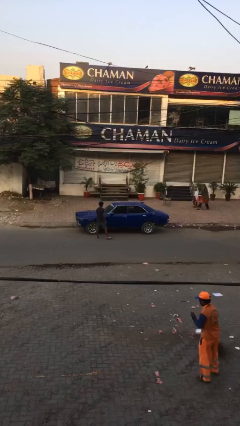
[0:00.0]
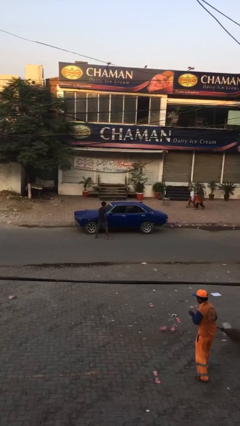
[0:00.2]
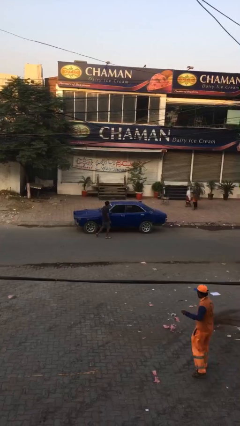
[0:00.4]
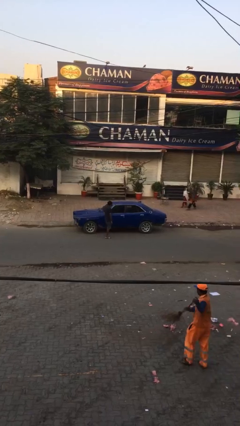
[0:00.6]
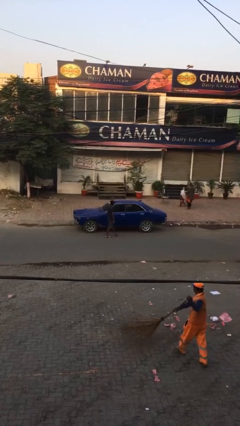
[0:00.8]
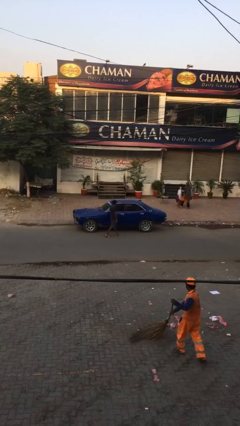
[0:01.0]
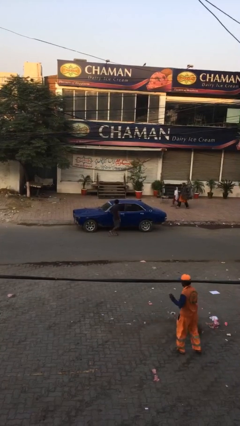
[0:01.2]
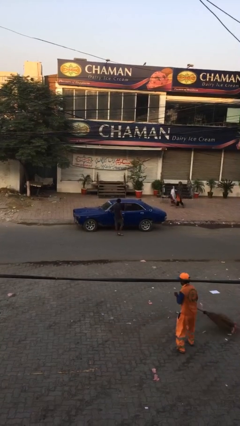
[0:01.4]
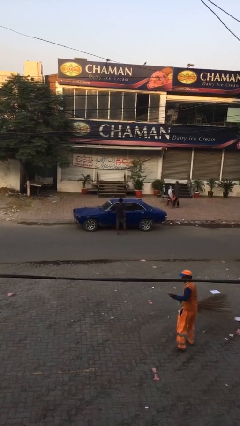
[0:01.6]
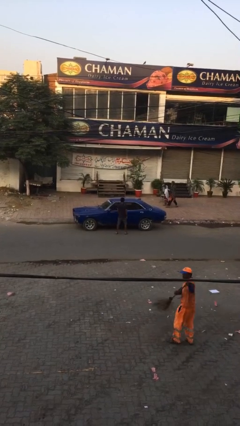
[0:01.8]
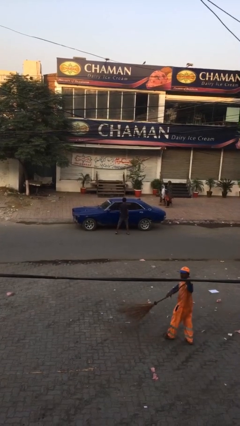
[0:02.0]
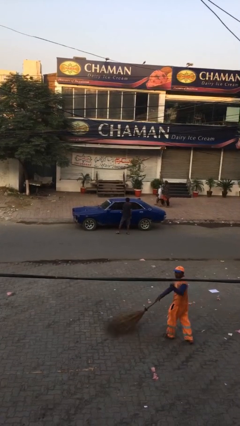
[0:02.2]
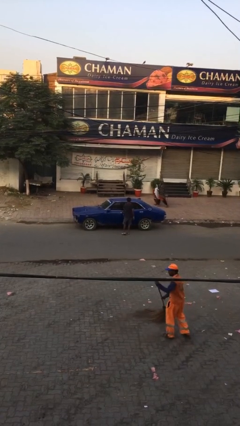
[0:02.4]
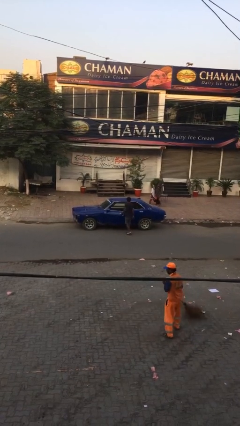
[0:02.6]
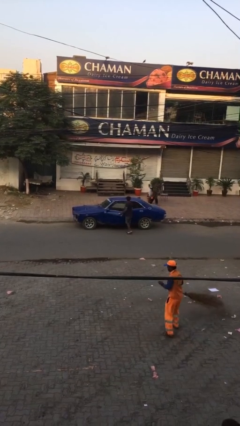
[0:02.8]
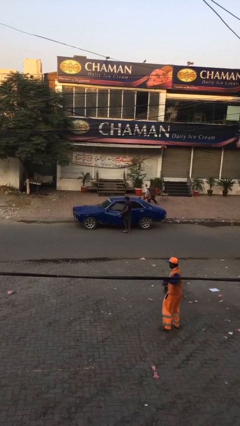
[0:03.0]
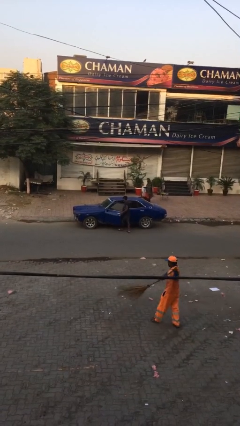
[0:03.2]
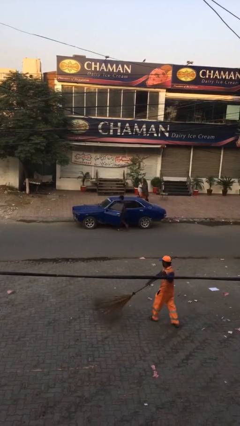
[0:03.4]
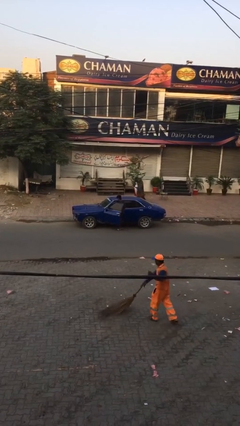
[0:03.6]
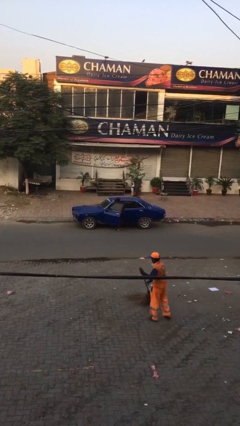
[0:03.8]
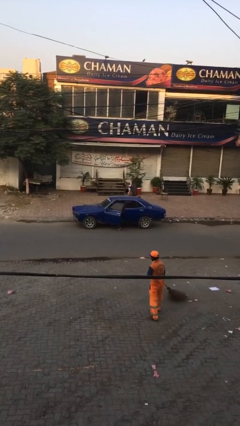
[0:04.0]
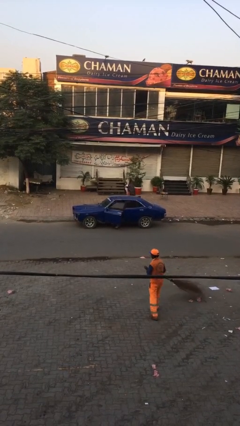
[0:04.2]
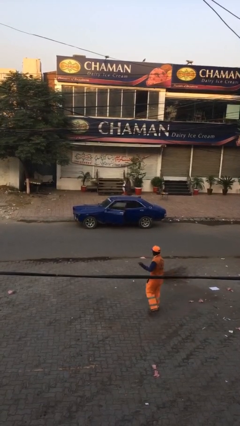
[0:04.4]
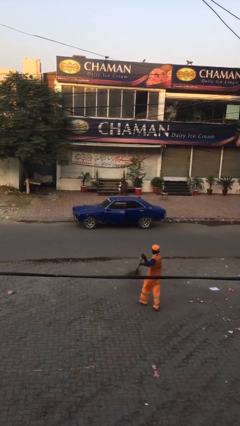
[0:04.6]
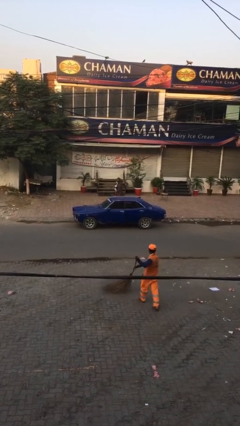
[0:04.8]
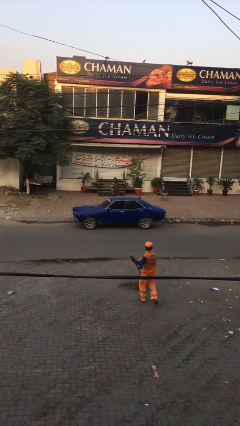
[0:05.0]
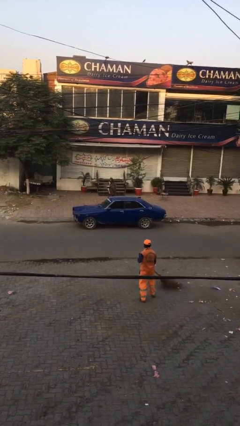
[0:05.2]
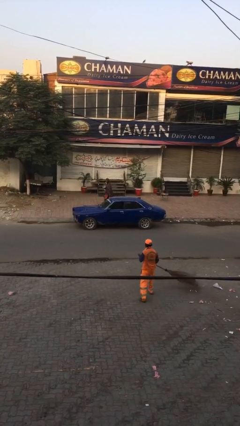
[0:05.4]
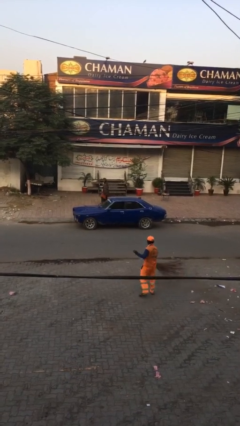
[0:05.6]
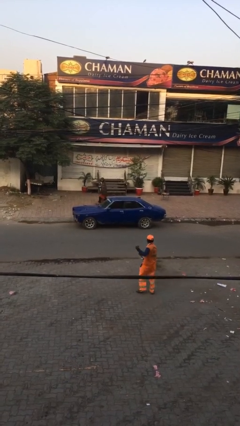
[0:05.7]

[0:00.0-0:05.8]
car picks up person

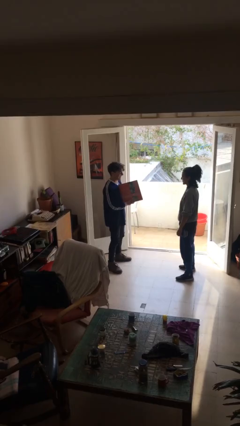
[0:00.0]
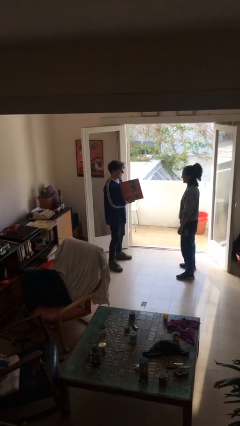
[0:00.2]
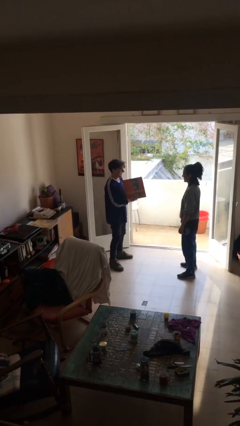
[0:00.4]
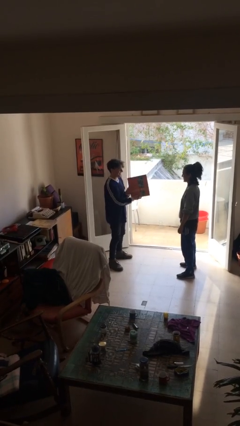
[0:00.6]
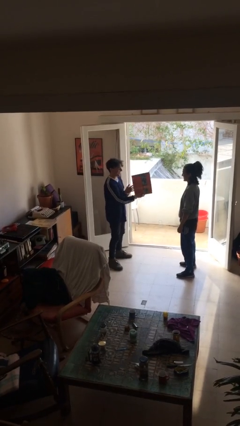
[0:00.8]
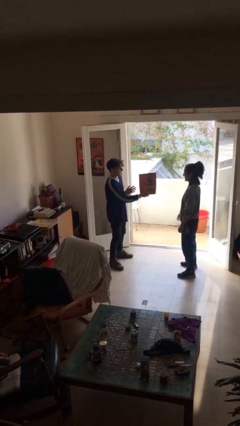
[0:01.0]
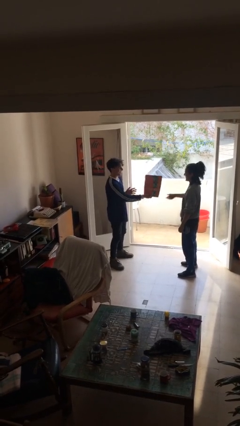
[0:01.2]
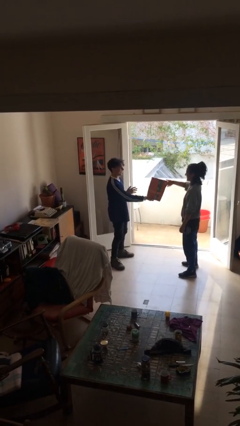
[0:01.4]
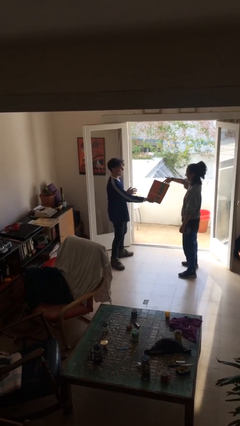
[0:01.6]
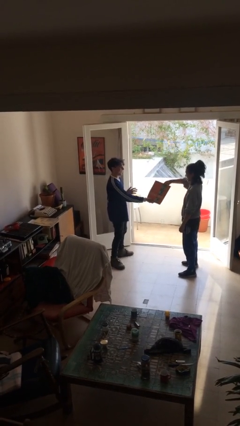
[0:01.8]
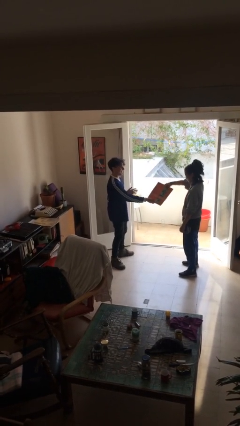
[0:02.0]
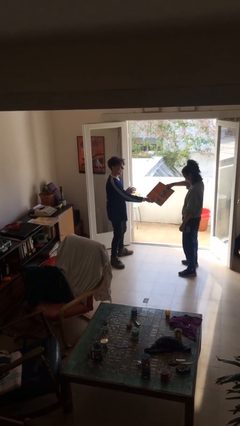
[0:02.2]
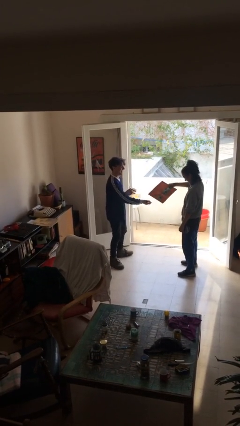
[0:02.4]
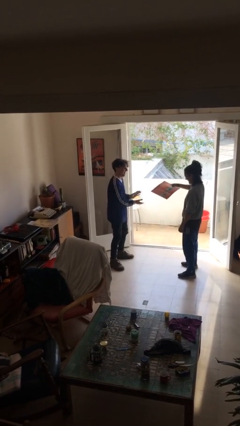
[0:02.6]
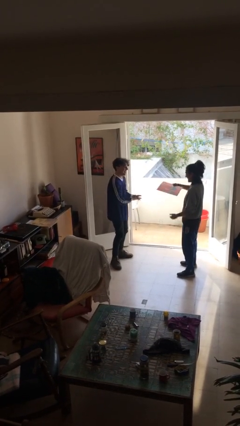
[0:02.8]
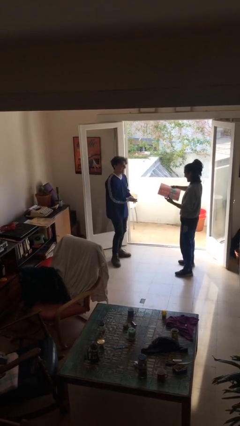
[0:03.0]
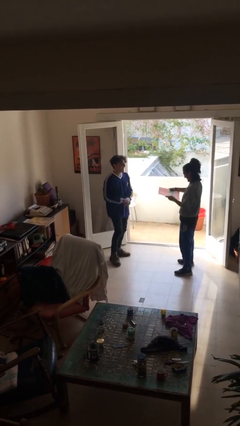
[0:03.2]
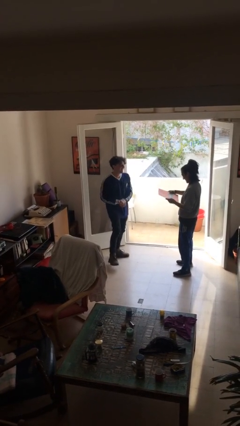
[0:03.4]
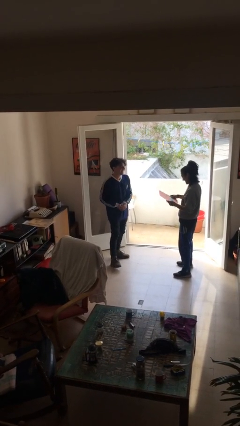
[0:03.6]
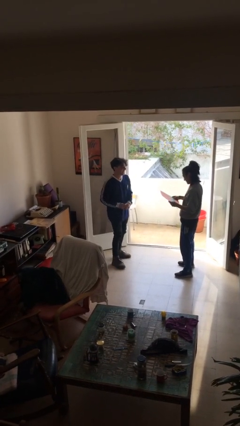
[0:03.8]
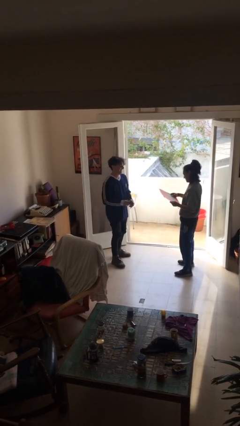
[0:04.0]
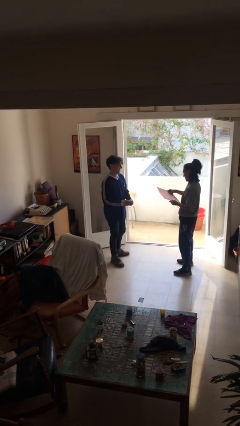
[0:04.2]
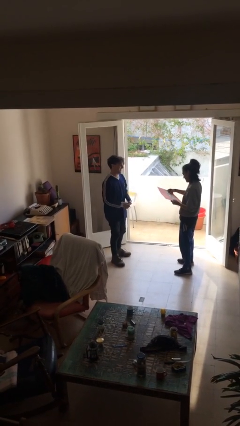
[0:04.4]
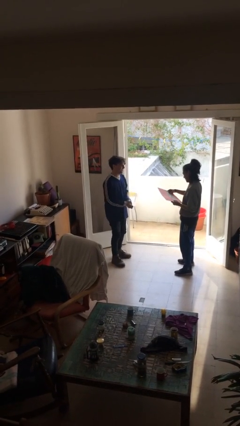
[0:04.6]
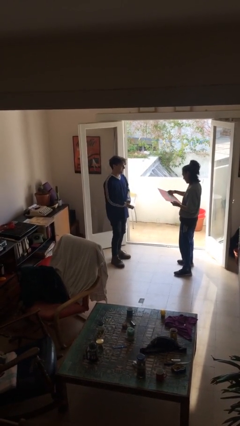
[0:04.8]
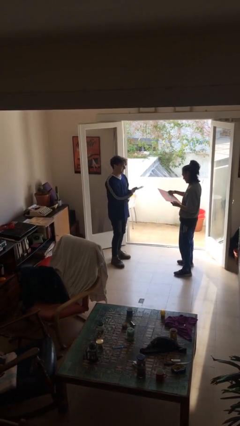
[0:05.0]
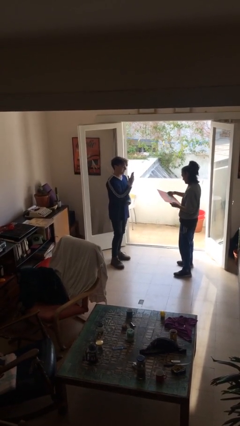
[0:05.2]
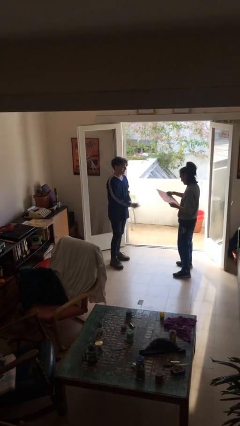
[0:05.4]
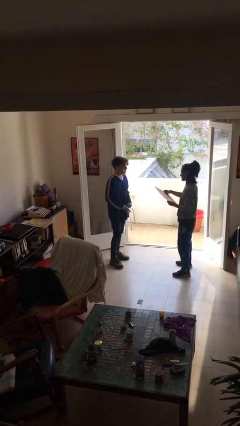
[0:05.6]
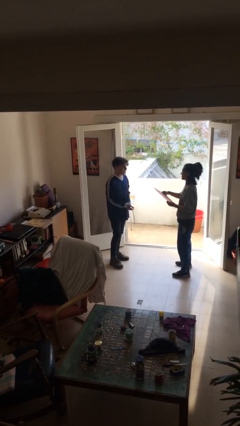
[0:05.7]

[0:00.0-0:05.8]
person transfers object to person

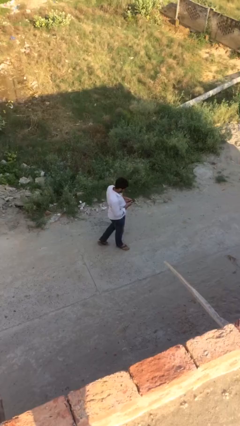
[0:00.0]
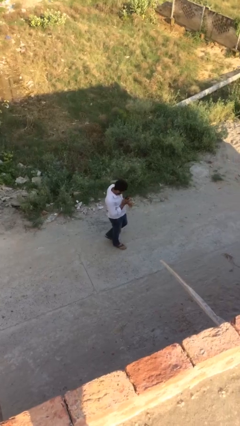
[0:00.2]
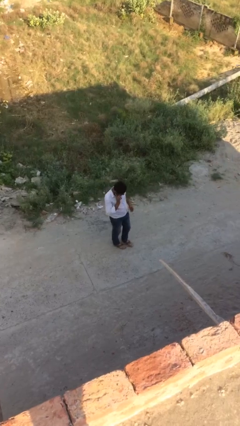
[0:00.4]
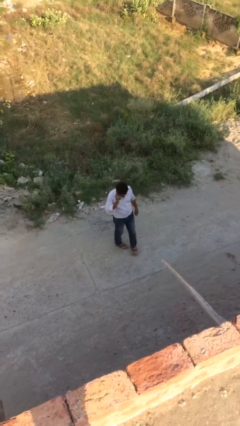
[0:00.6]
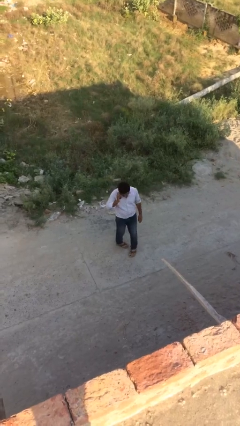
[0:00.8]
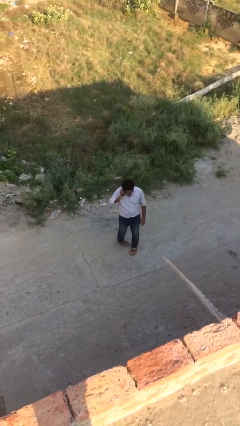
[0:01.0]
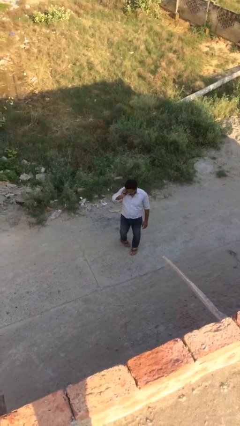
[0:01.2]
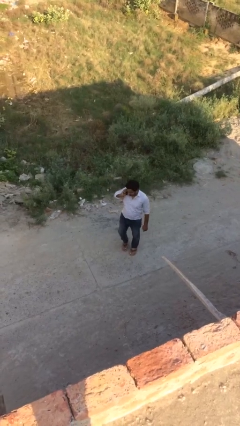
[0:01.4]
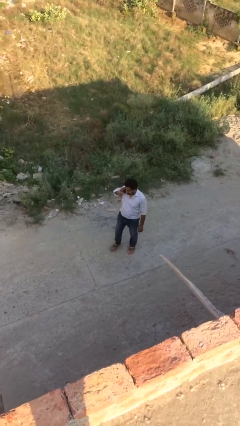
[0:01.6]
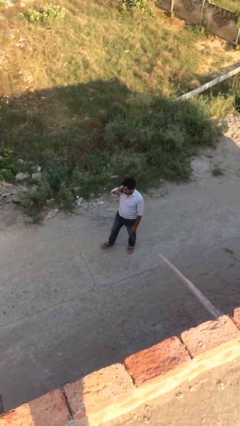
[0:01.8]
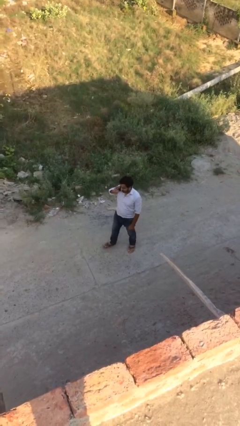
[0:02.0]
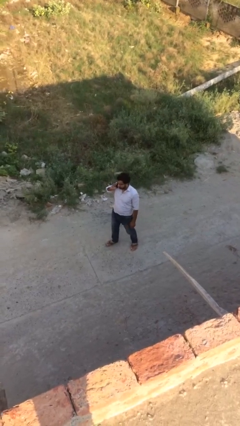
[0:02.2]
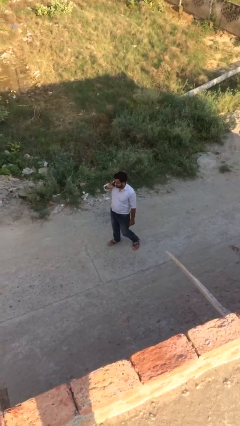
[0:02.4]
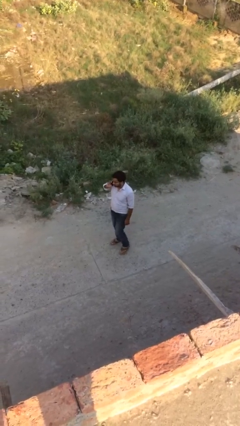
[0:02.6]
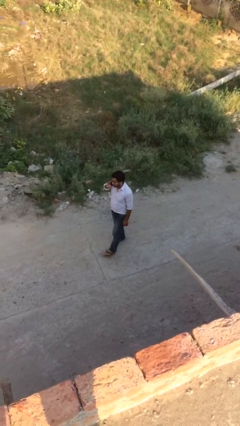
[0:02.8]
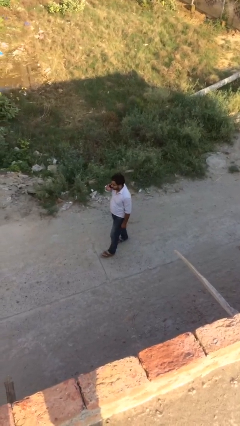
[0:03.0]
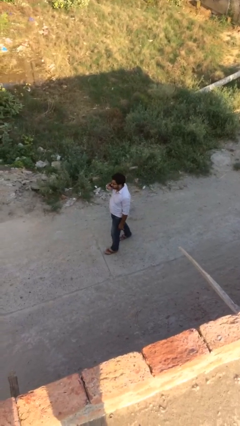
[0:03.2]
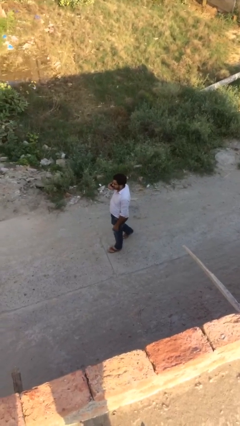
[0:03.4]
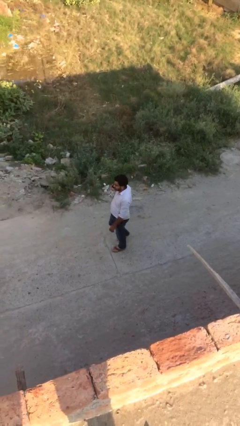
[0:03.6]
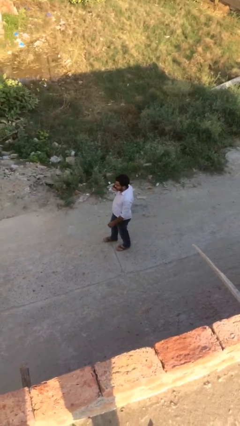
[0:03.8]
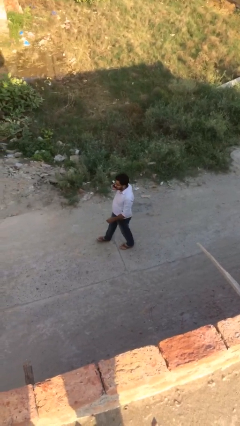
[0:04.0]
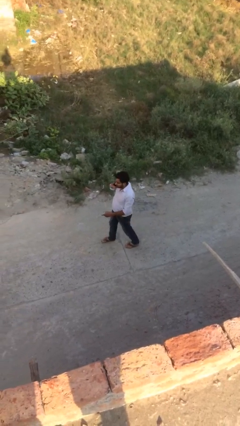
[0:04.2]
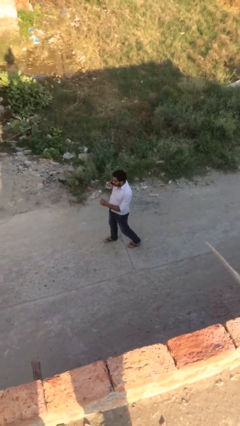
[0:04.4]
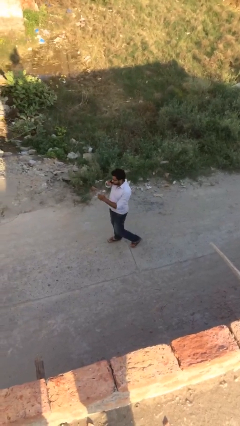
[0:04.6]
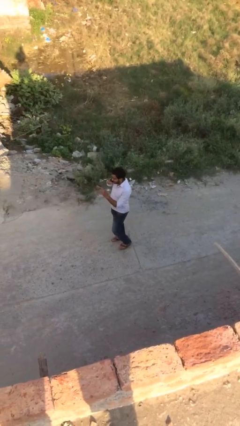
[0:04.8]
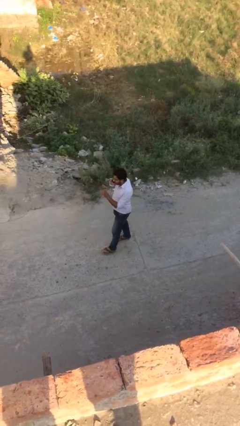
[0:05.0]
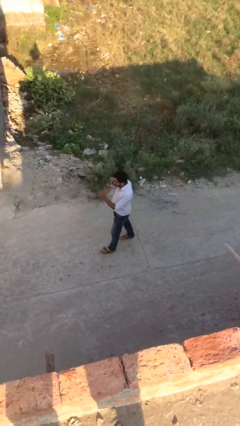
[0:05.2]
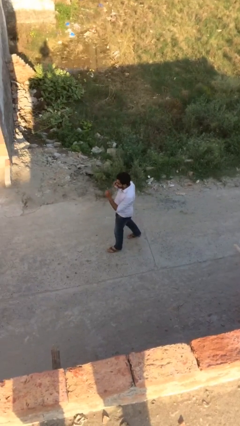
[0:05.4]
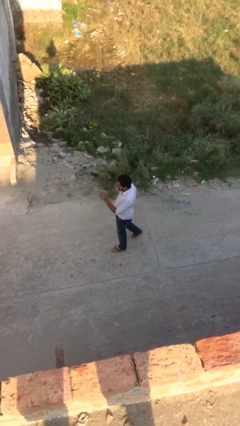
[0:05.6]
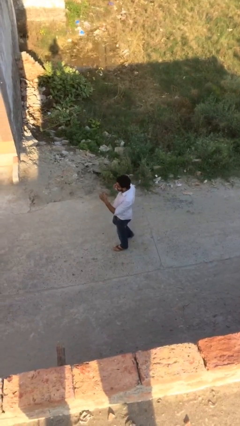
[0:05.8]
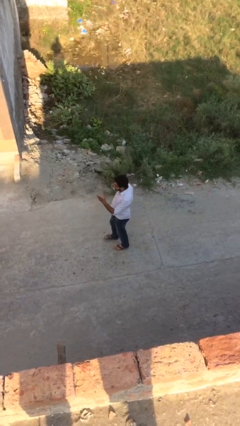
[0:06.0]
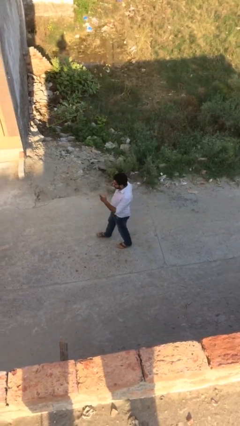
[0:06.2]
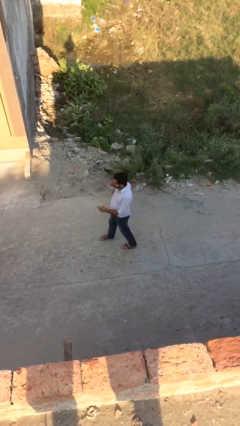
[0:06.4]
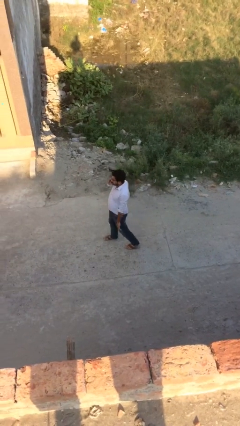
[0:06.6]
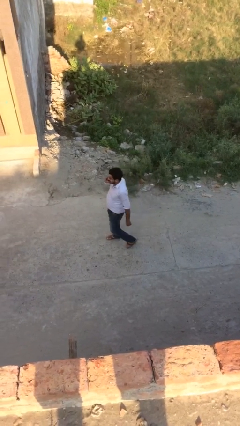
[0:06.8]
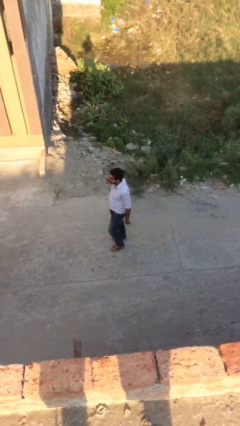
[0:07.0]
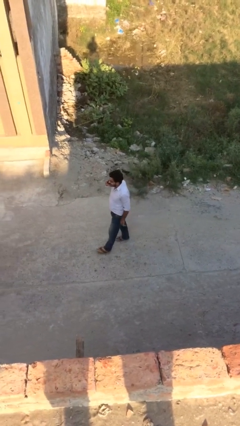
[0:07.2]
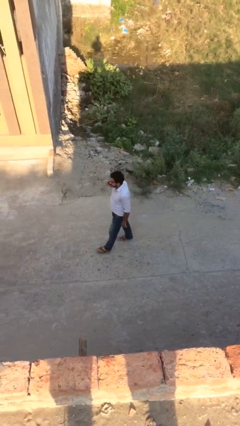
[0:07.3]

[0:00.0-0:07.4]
person talks on phone
